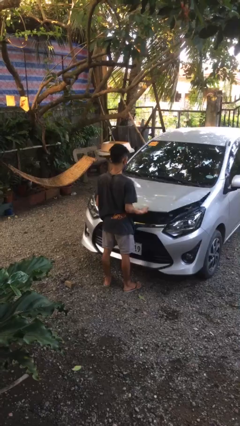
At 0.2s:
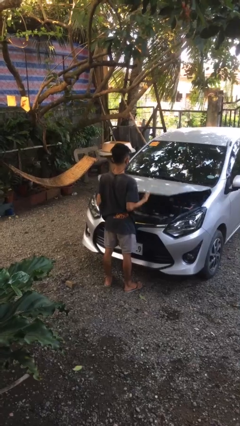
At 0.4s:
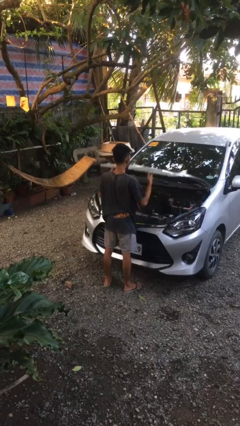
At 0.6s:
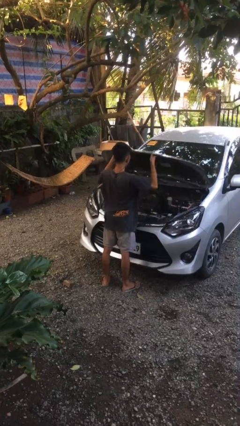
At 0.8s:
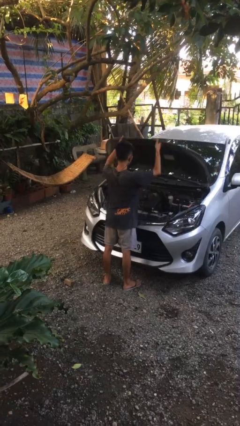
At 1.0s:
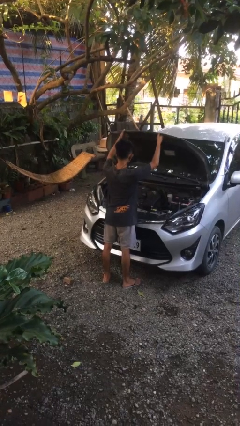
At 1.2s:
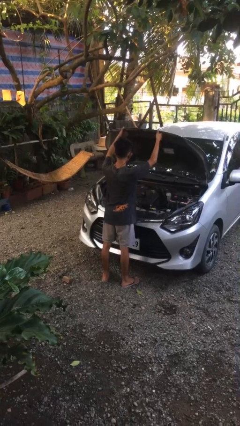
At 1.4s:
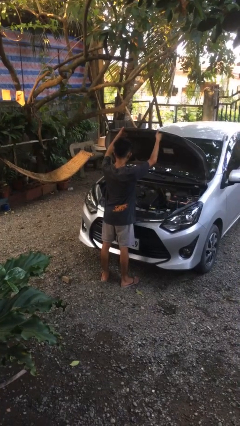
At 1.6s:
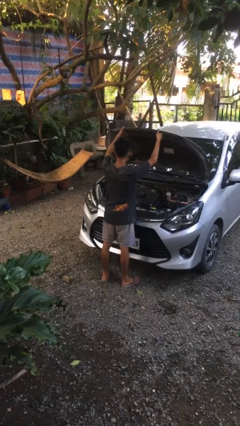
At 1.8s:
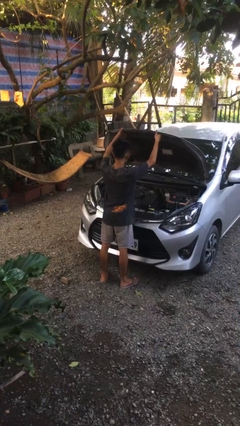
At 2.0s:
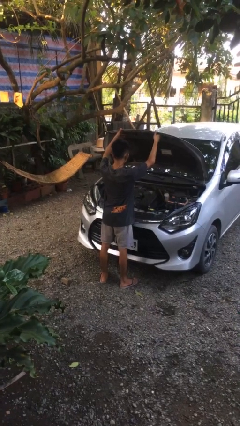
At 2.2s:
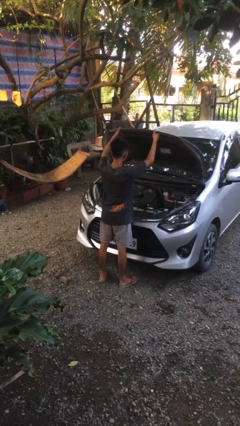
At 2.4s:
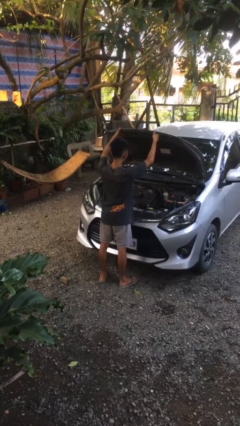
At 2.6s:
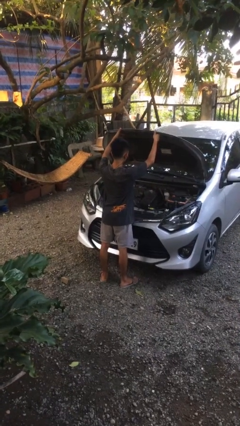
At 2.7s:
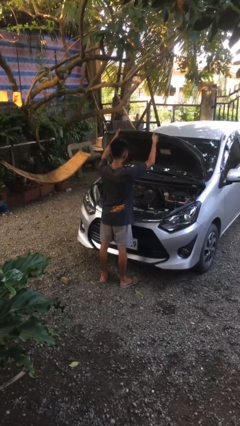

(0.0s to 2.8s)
person opens car hood

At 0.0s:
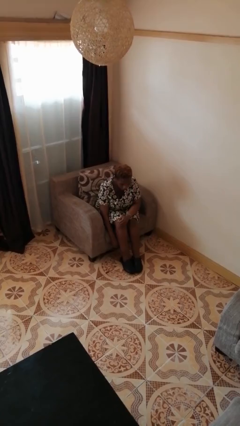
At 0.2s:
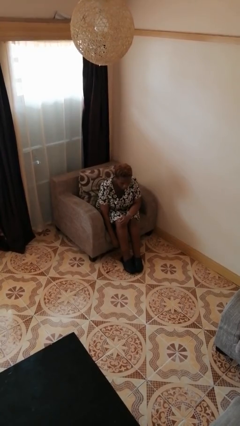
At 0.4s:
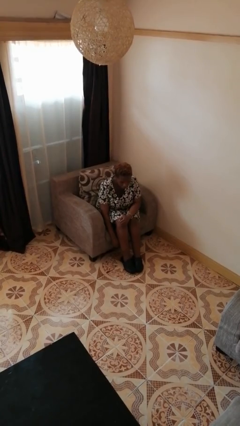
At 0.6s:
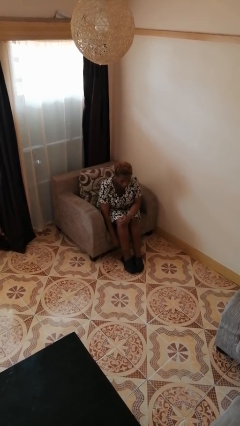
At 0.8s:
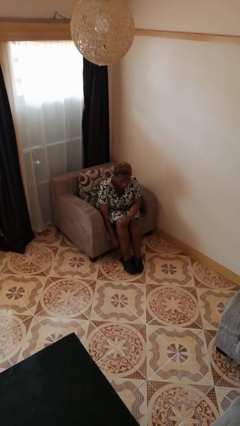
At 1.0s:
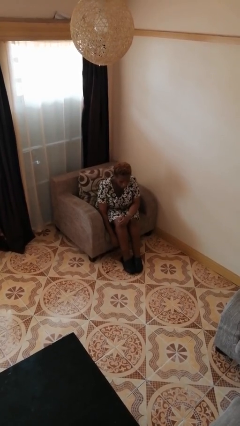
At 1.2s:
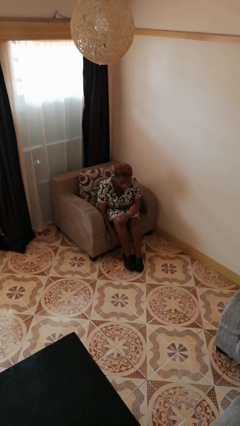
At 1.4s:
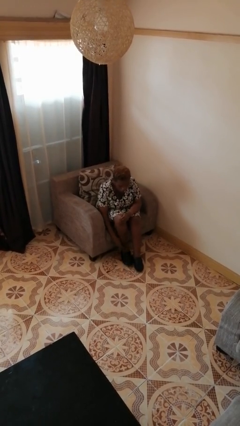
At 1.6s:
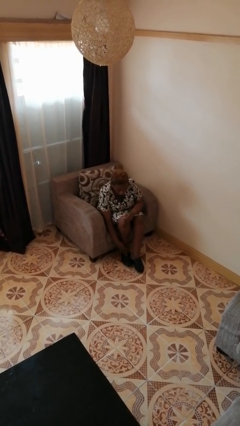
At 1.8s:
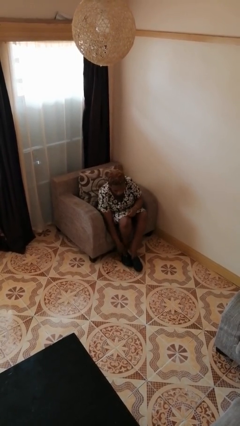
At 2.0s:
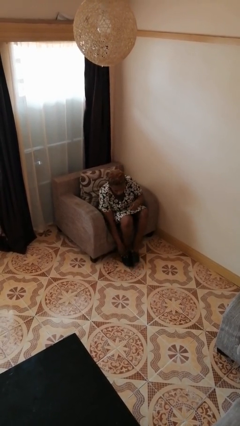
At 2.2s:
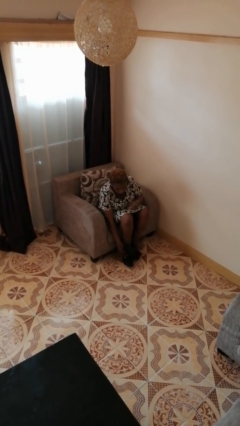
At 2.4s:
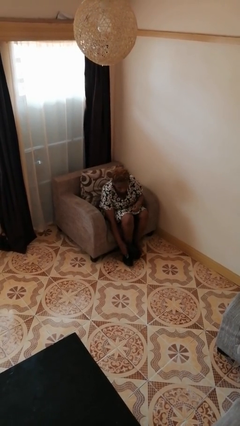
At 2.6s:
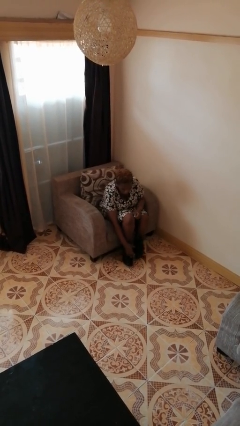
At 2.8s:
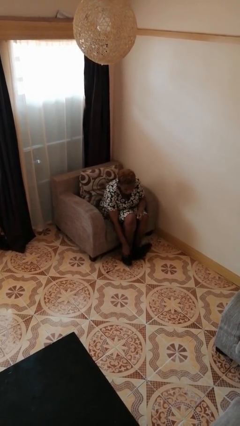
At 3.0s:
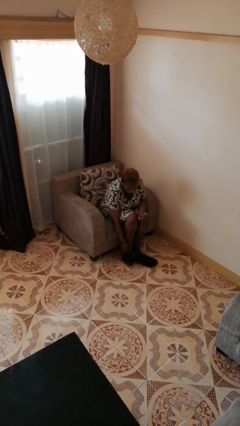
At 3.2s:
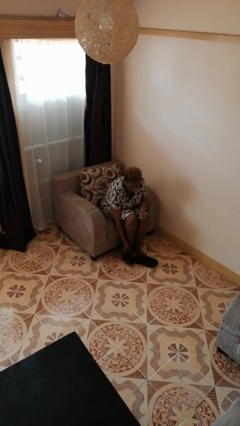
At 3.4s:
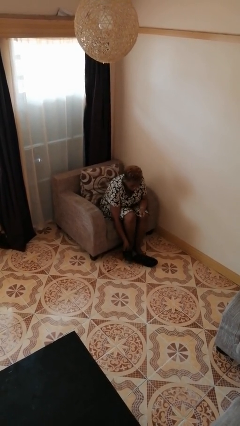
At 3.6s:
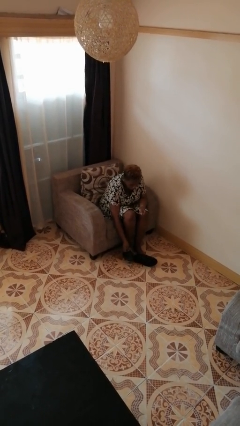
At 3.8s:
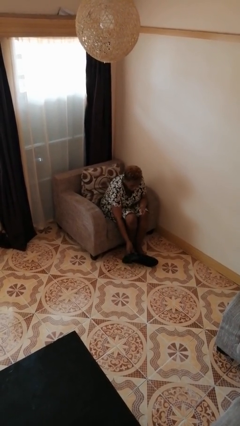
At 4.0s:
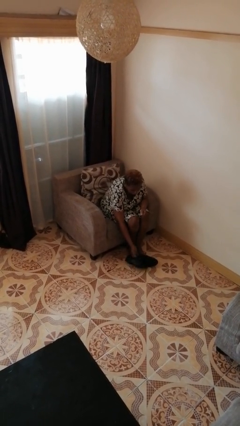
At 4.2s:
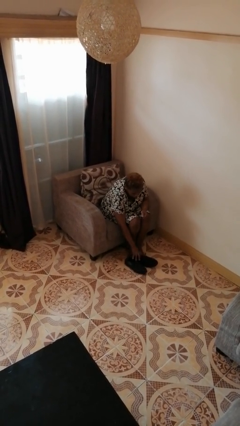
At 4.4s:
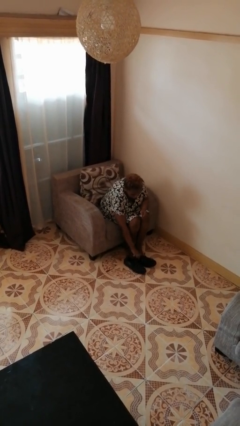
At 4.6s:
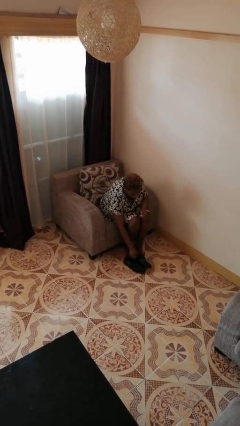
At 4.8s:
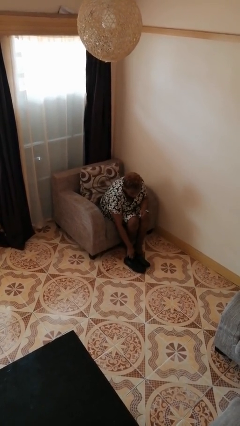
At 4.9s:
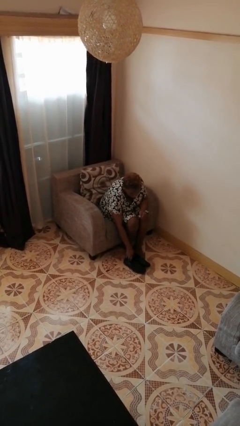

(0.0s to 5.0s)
person takes off shoes

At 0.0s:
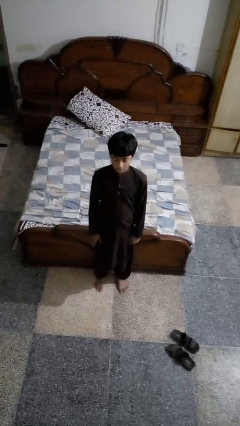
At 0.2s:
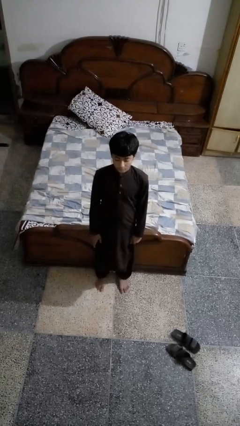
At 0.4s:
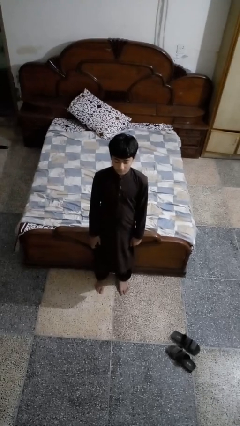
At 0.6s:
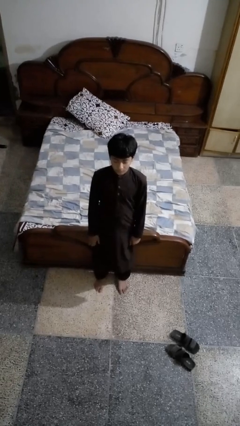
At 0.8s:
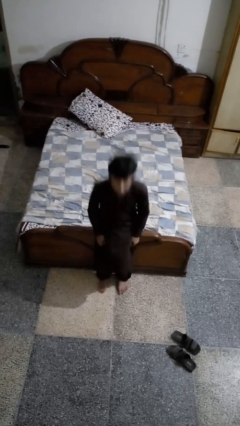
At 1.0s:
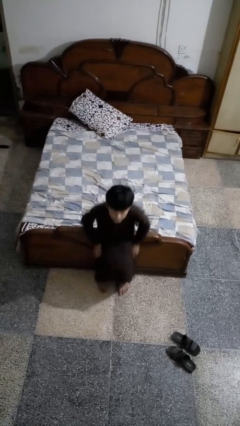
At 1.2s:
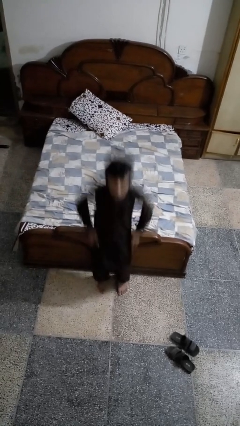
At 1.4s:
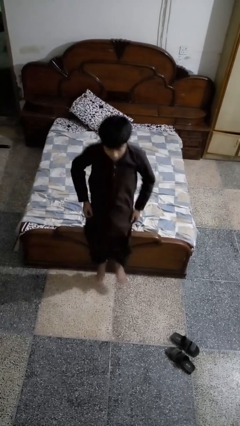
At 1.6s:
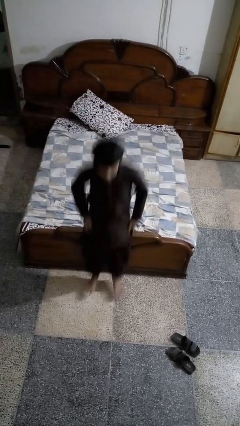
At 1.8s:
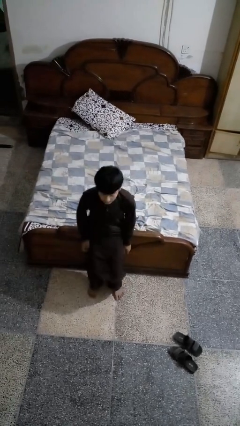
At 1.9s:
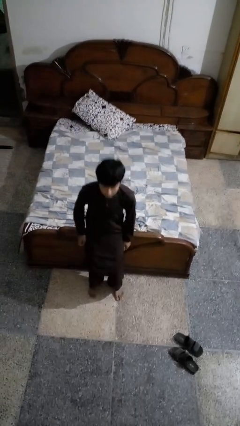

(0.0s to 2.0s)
person jumps

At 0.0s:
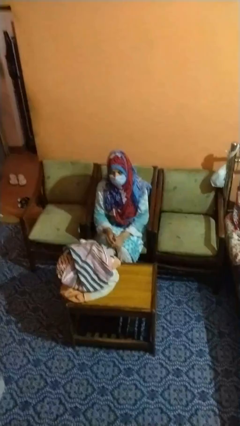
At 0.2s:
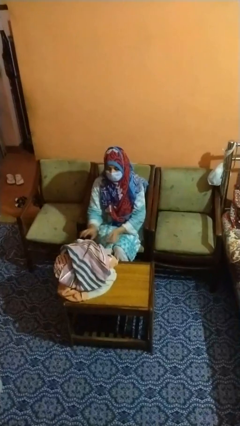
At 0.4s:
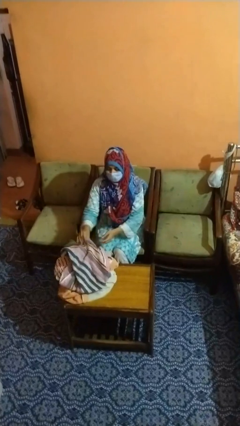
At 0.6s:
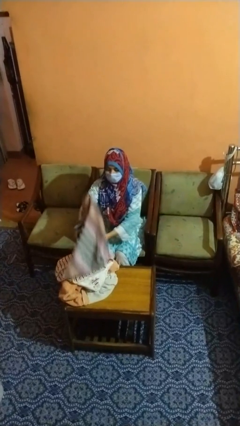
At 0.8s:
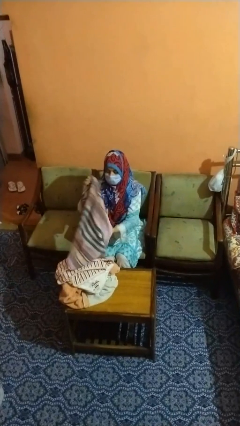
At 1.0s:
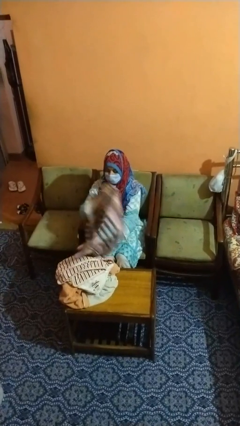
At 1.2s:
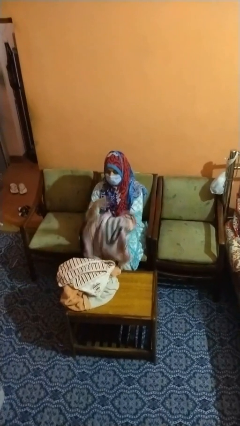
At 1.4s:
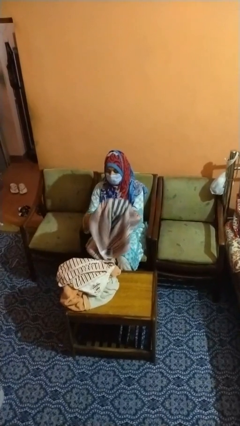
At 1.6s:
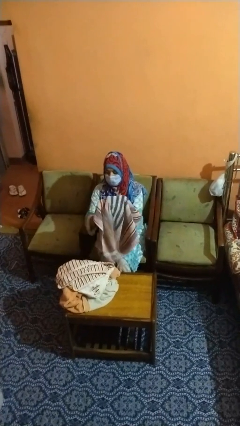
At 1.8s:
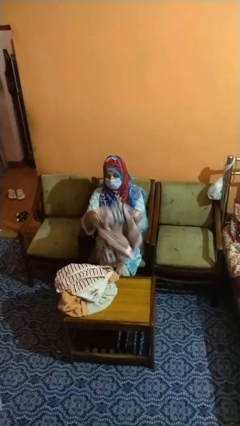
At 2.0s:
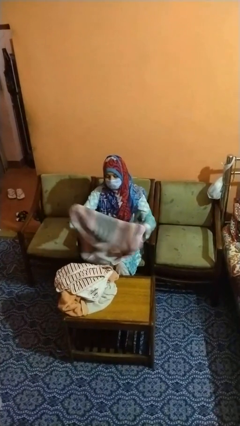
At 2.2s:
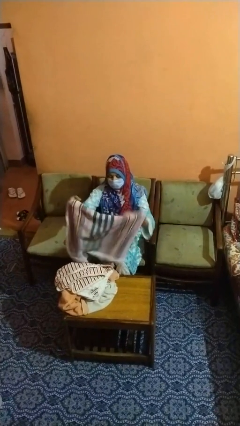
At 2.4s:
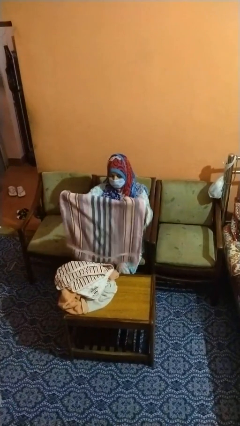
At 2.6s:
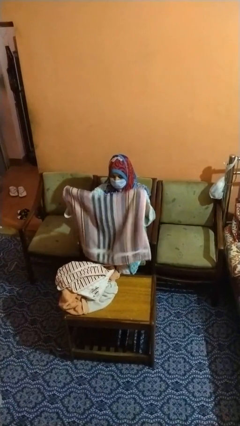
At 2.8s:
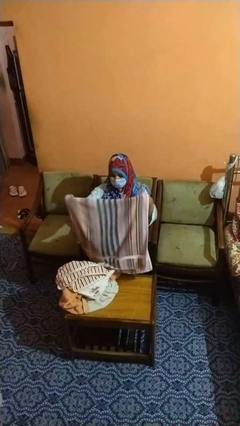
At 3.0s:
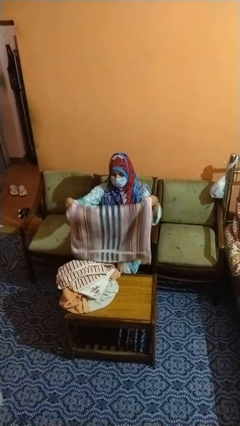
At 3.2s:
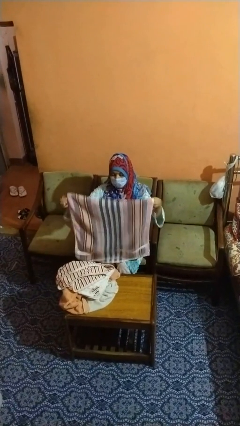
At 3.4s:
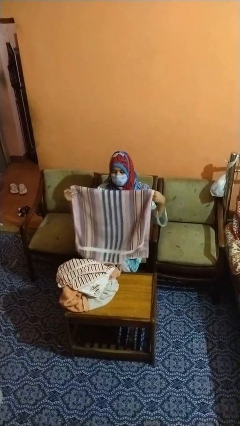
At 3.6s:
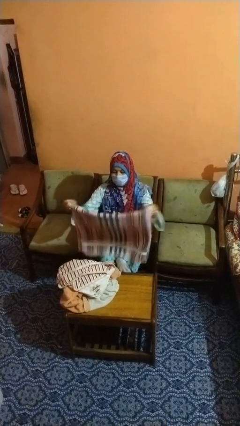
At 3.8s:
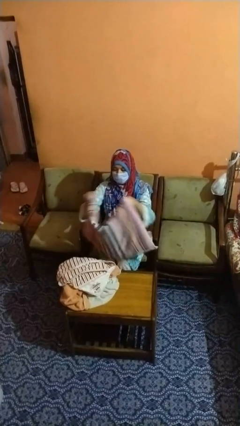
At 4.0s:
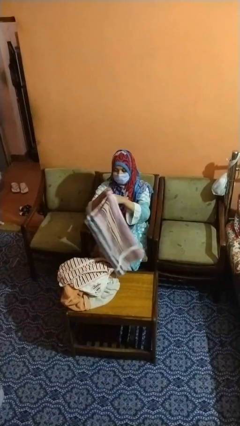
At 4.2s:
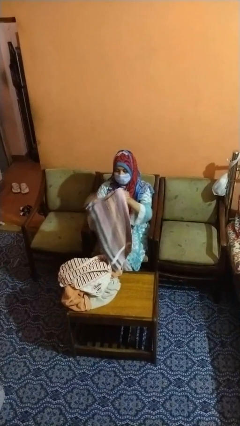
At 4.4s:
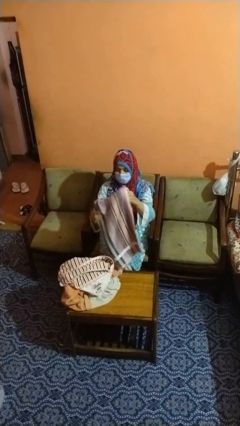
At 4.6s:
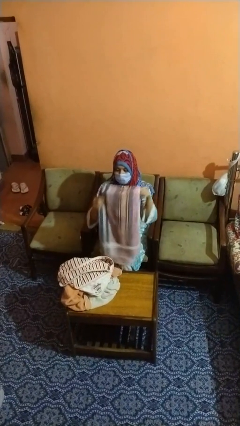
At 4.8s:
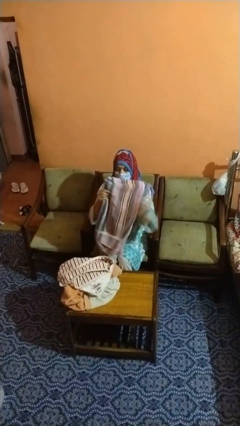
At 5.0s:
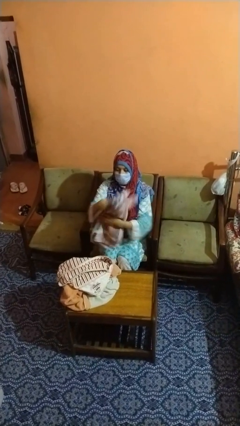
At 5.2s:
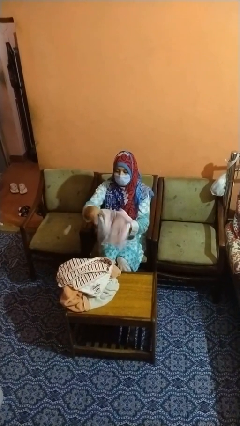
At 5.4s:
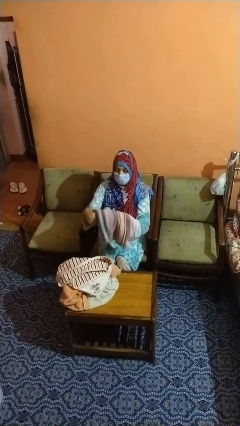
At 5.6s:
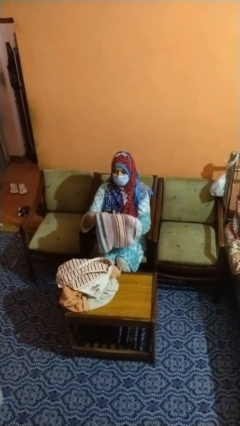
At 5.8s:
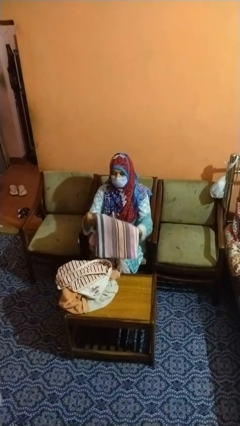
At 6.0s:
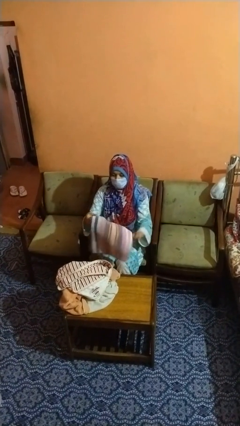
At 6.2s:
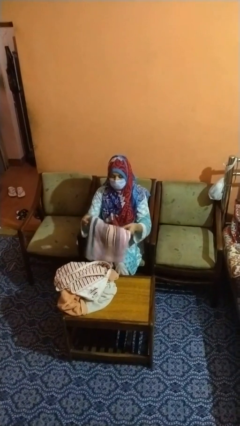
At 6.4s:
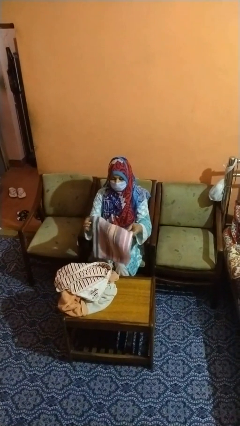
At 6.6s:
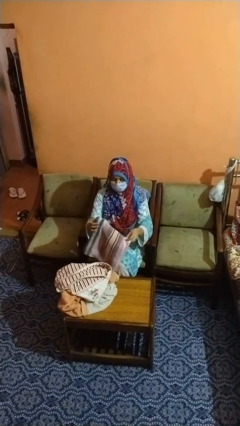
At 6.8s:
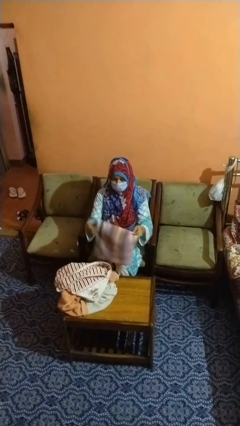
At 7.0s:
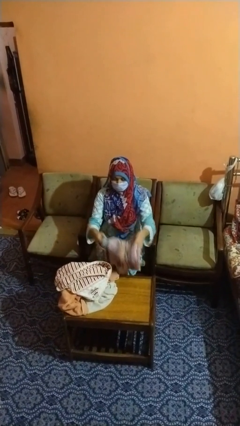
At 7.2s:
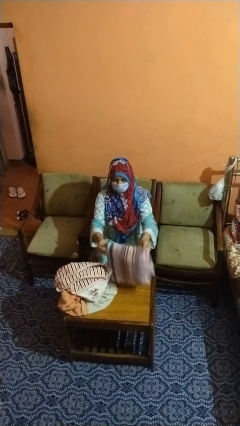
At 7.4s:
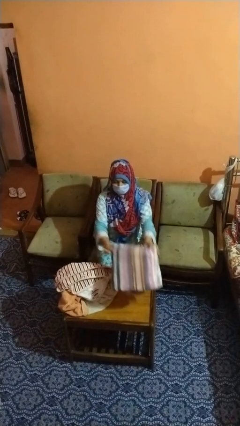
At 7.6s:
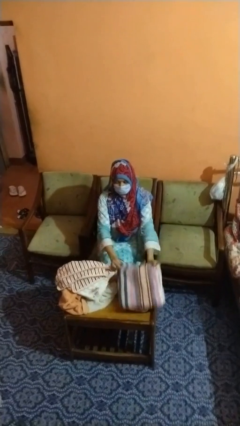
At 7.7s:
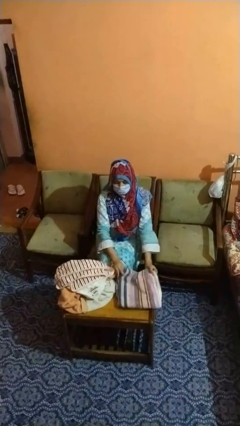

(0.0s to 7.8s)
person folds towel
